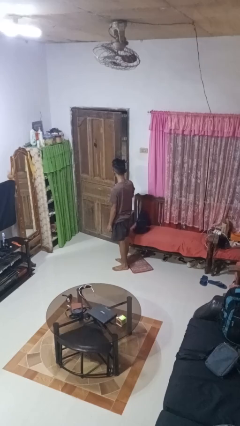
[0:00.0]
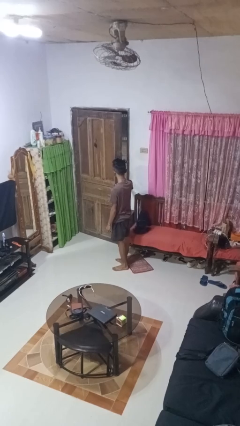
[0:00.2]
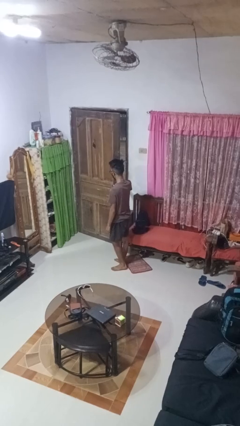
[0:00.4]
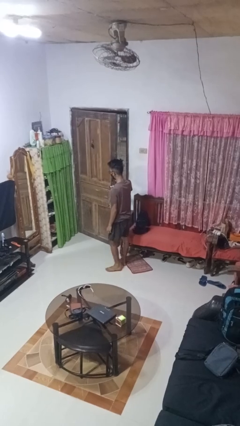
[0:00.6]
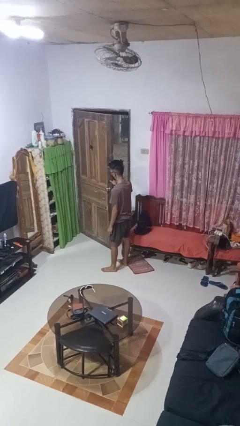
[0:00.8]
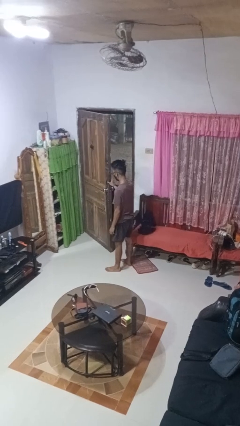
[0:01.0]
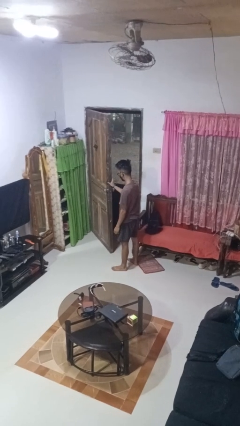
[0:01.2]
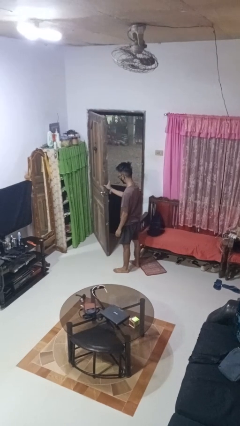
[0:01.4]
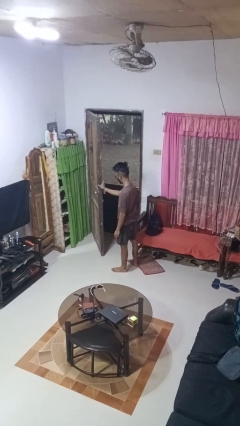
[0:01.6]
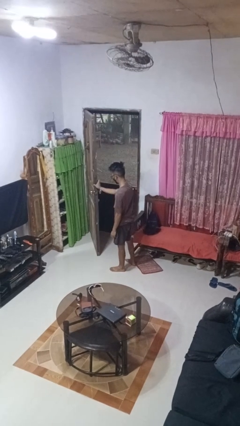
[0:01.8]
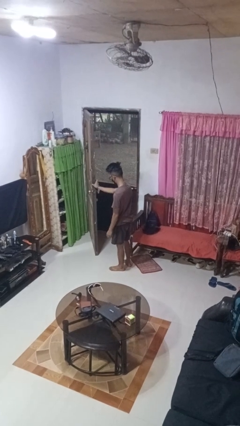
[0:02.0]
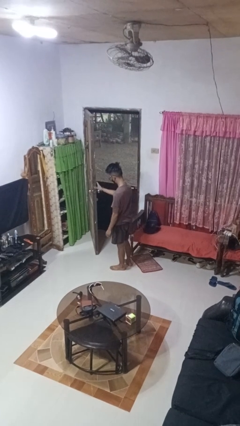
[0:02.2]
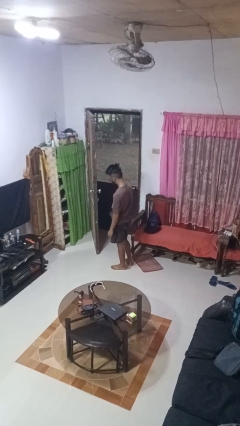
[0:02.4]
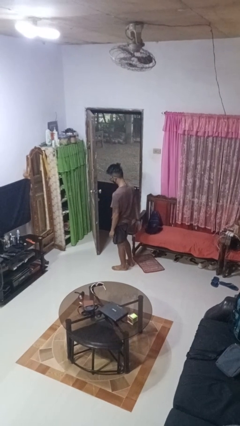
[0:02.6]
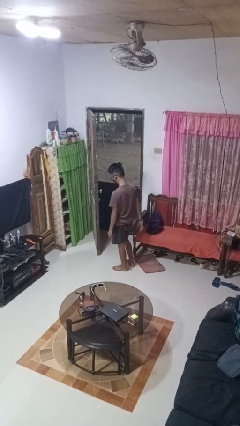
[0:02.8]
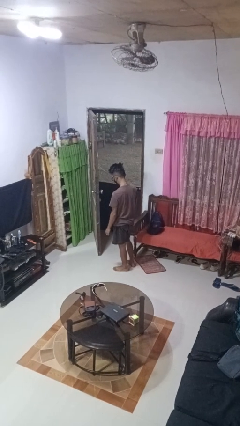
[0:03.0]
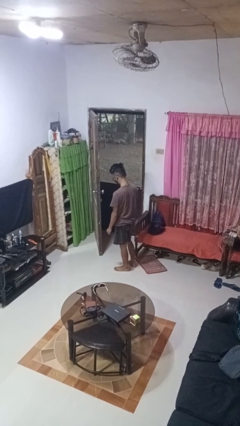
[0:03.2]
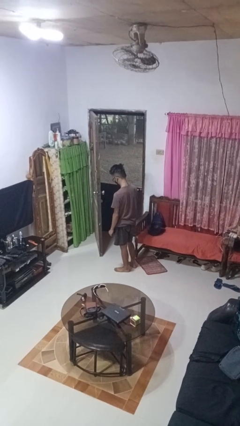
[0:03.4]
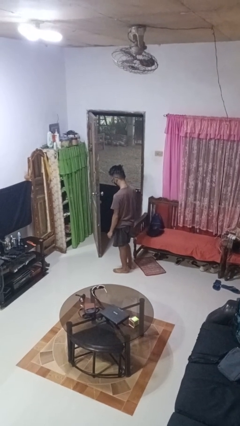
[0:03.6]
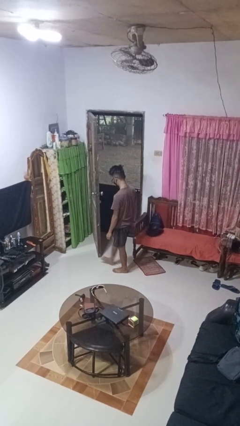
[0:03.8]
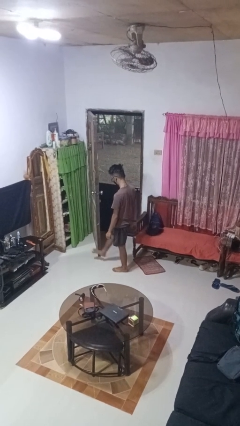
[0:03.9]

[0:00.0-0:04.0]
person opens facility door

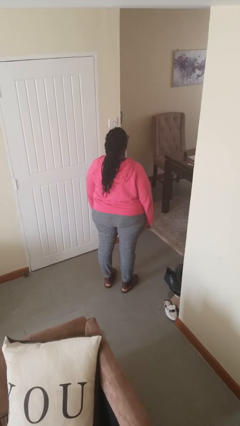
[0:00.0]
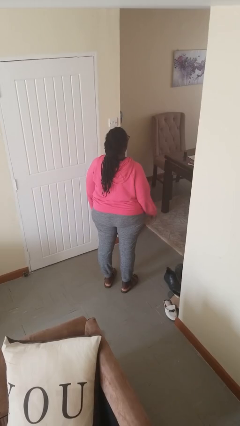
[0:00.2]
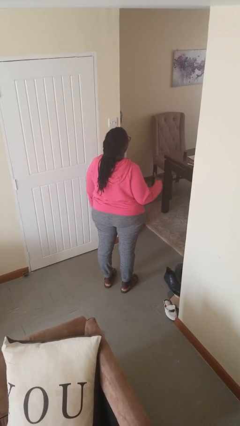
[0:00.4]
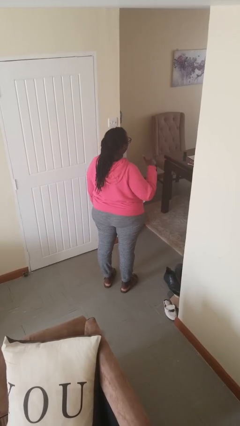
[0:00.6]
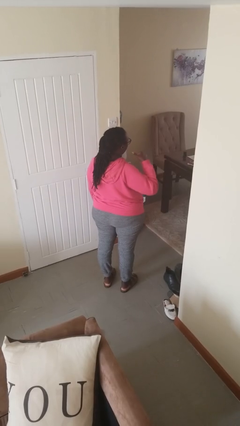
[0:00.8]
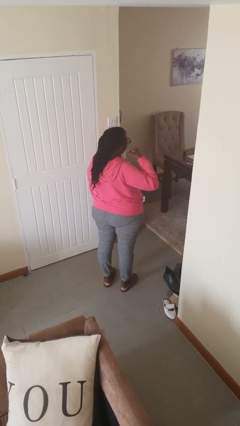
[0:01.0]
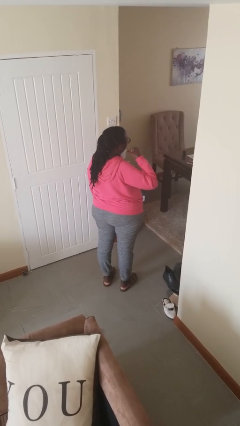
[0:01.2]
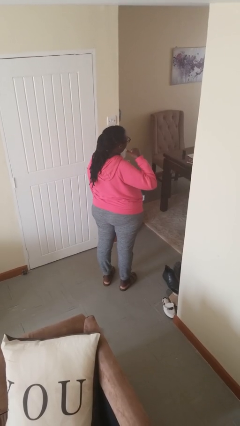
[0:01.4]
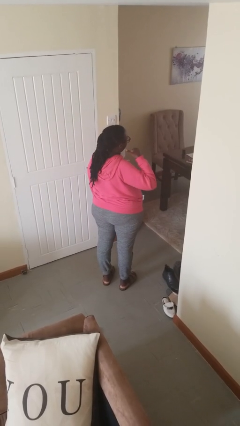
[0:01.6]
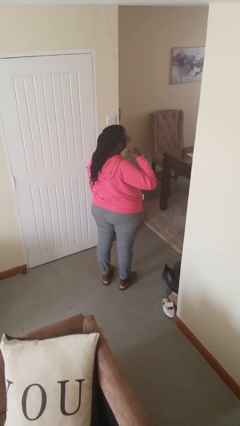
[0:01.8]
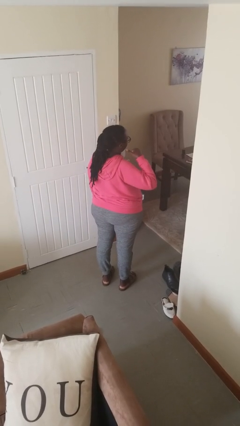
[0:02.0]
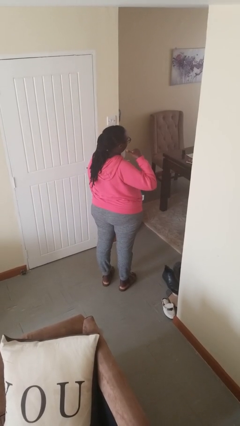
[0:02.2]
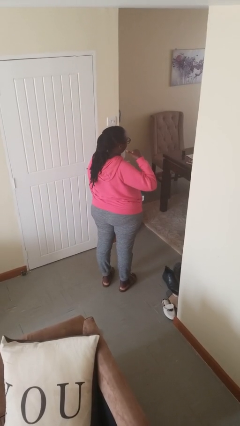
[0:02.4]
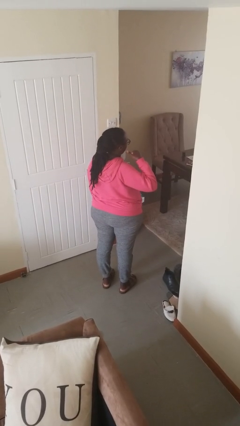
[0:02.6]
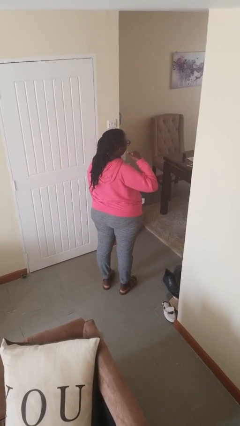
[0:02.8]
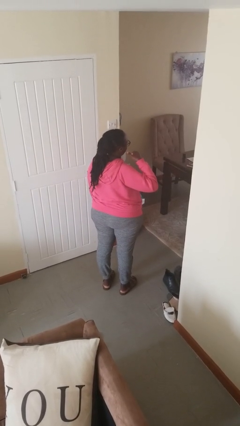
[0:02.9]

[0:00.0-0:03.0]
person gestures call me

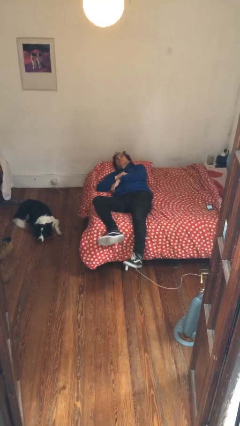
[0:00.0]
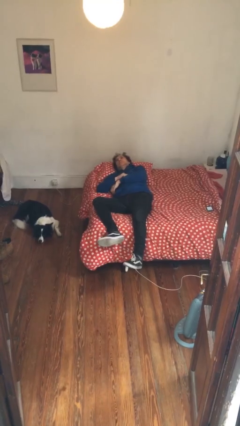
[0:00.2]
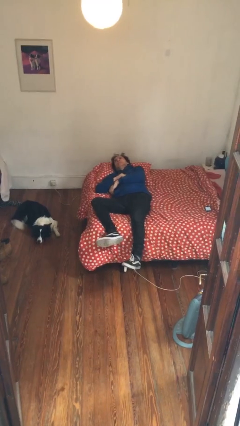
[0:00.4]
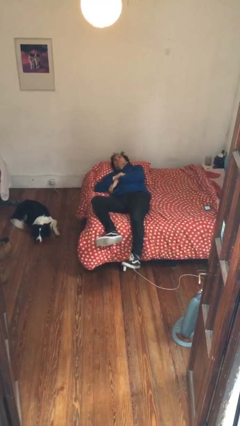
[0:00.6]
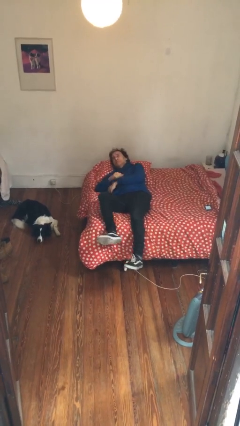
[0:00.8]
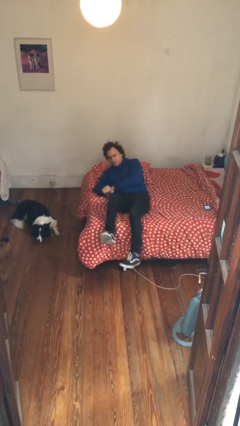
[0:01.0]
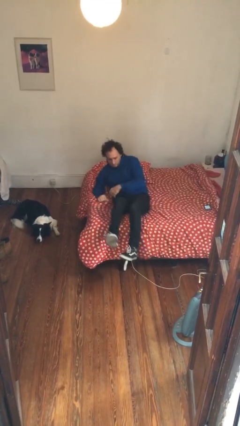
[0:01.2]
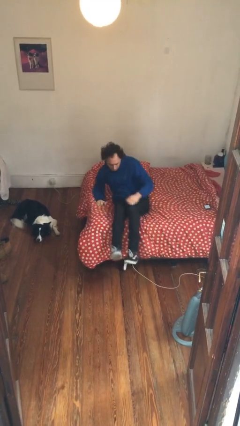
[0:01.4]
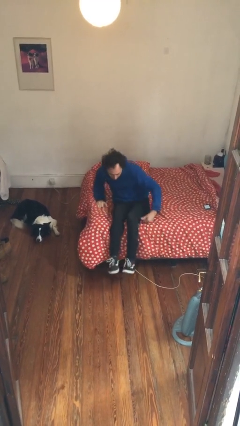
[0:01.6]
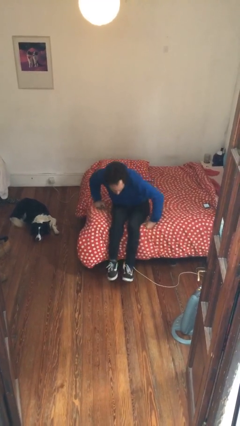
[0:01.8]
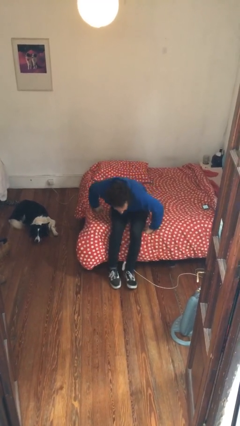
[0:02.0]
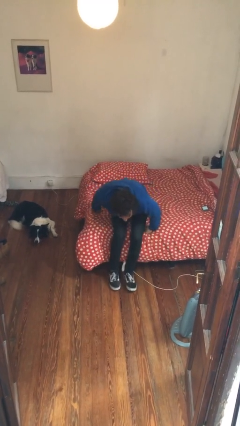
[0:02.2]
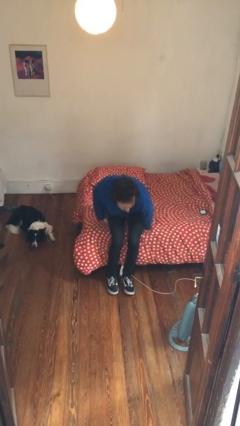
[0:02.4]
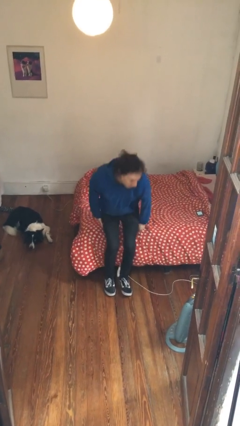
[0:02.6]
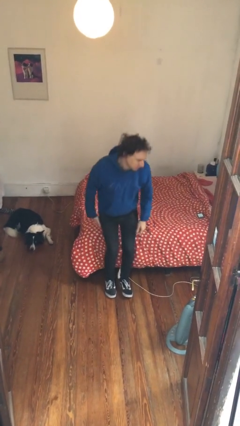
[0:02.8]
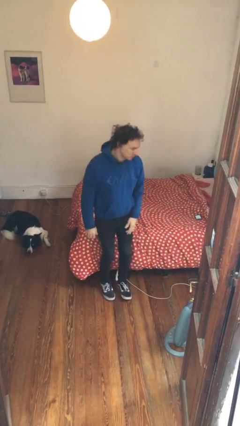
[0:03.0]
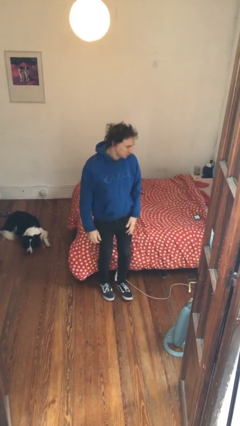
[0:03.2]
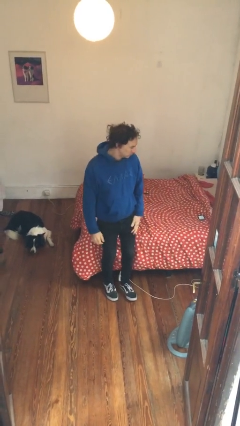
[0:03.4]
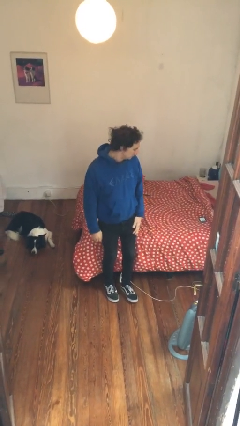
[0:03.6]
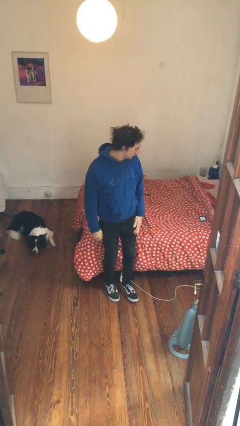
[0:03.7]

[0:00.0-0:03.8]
person stands up

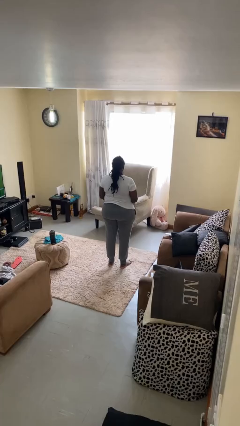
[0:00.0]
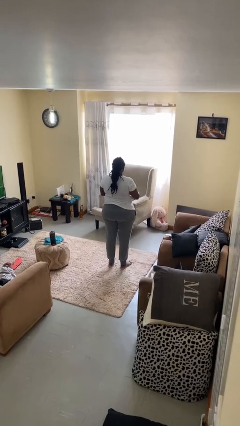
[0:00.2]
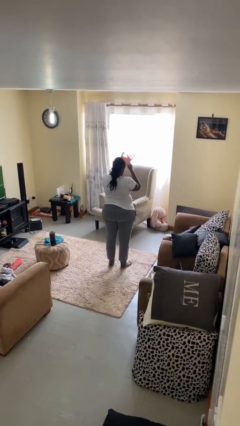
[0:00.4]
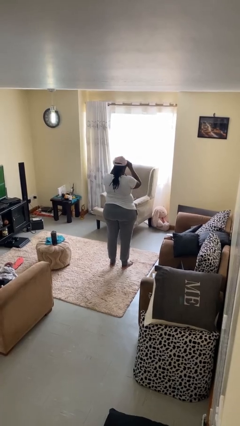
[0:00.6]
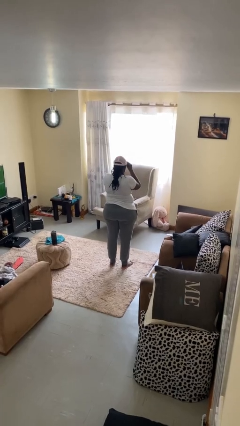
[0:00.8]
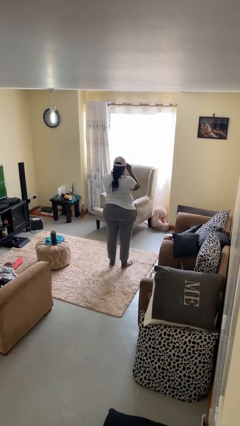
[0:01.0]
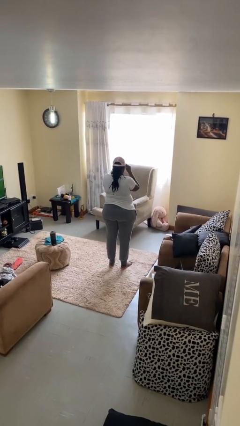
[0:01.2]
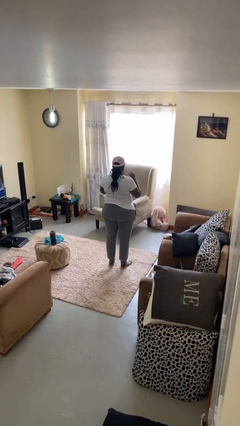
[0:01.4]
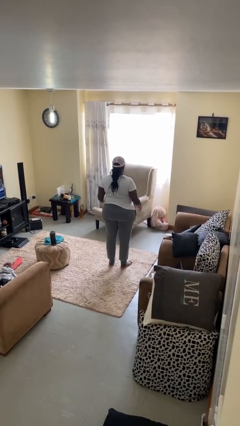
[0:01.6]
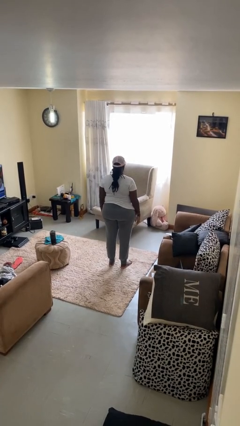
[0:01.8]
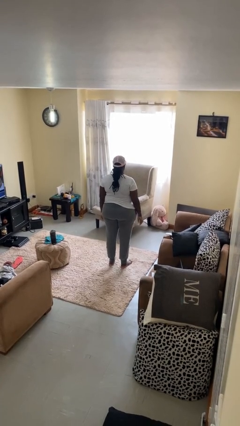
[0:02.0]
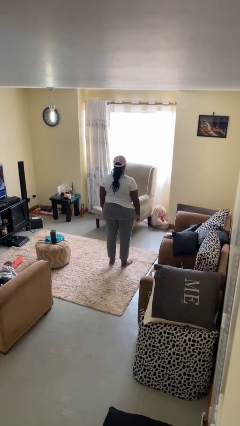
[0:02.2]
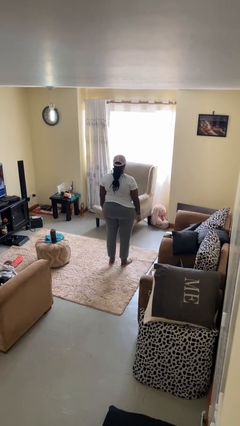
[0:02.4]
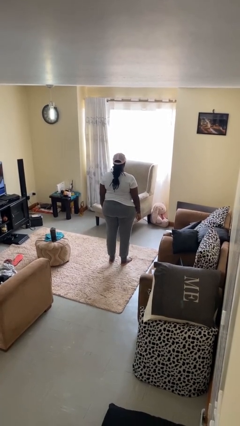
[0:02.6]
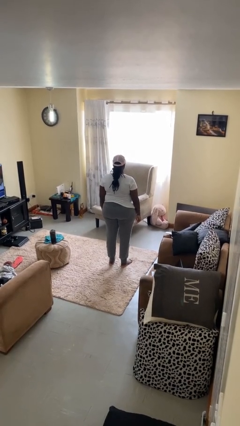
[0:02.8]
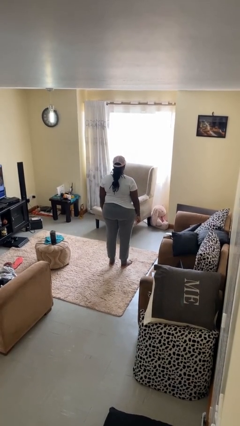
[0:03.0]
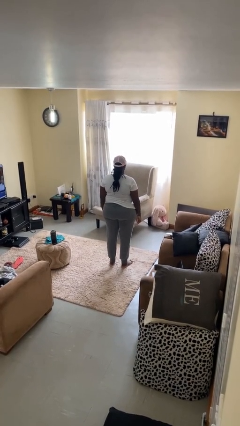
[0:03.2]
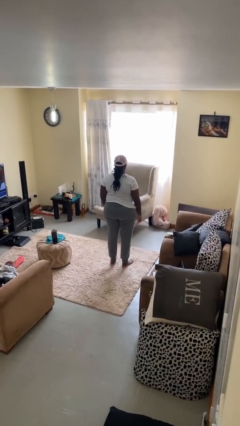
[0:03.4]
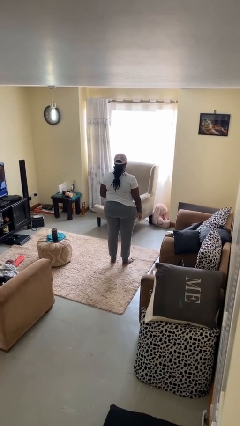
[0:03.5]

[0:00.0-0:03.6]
person puts on hat

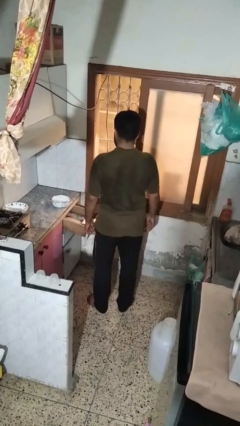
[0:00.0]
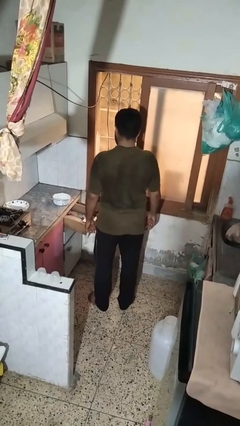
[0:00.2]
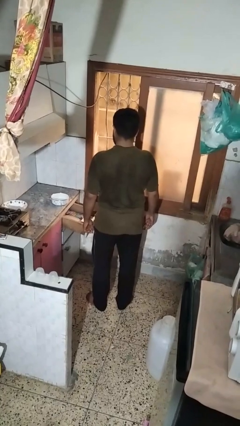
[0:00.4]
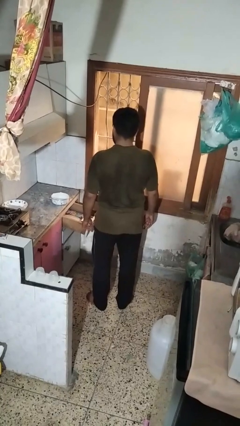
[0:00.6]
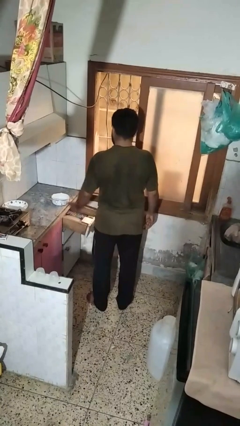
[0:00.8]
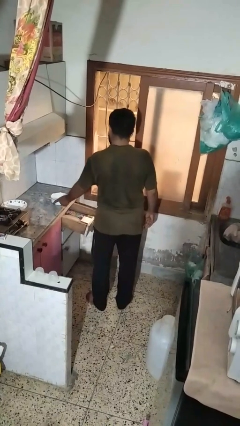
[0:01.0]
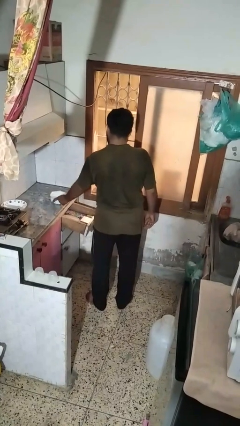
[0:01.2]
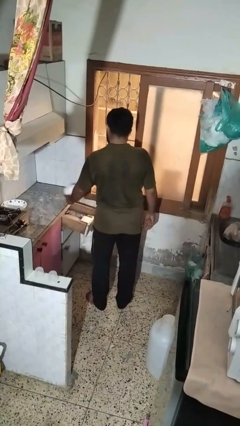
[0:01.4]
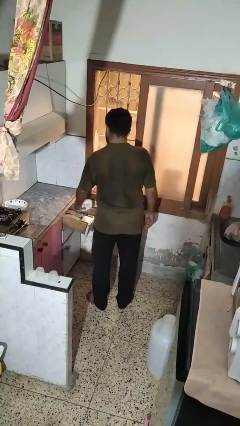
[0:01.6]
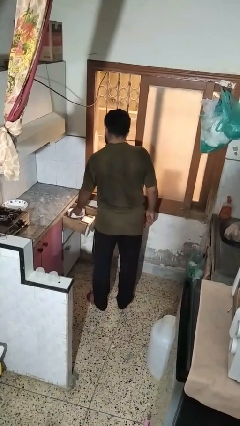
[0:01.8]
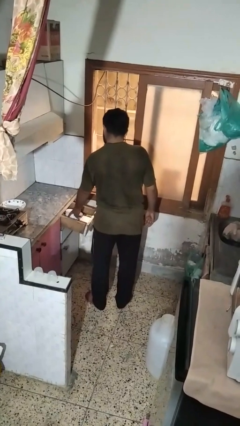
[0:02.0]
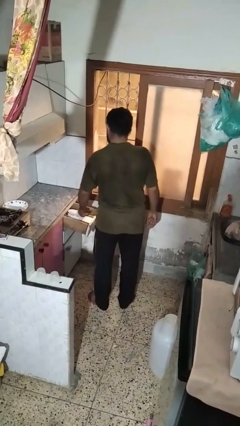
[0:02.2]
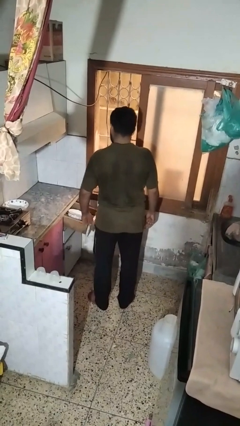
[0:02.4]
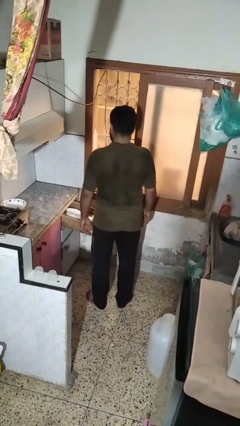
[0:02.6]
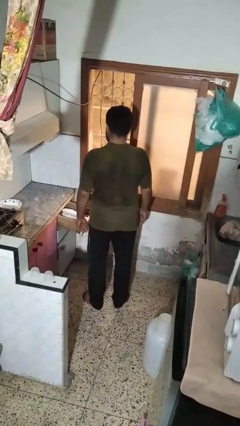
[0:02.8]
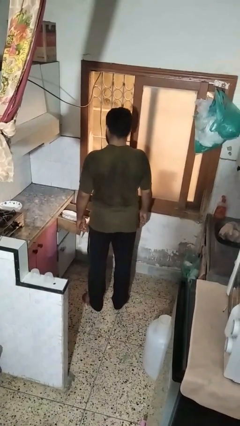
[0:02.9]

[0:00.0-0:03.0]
person puts object into kitchen drawer

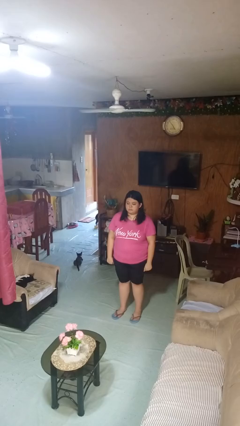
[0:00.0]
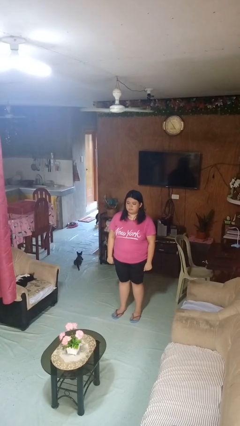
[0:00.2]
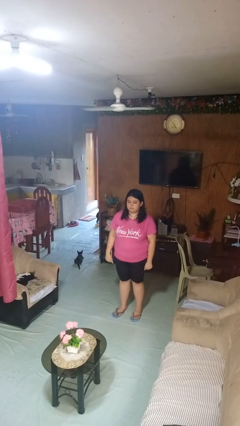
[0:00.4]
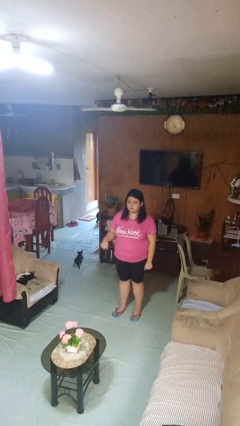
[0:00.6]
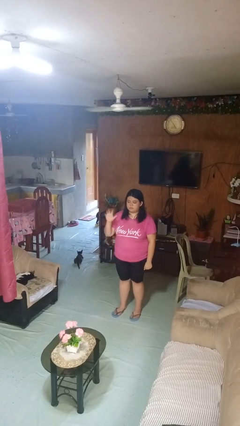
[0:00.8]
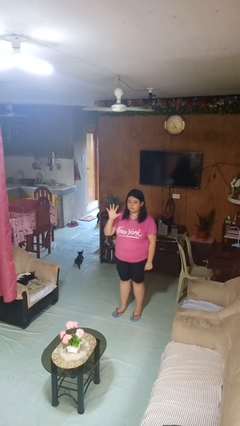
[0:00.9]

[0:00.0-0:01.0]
person gestures number five
